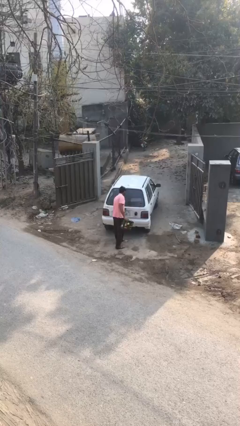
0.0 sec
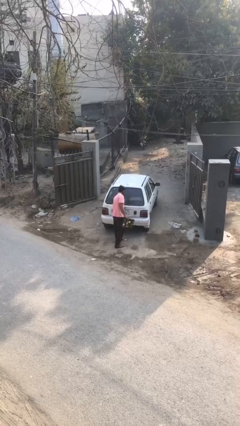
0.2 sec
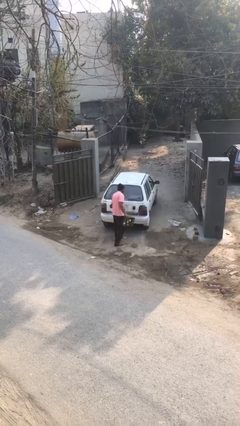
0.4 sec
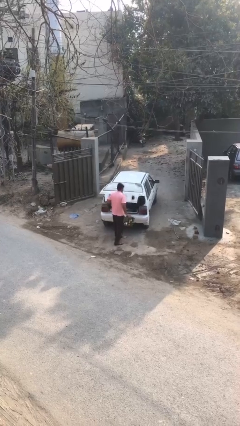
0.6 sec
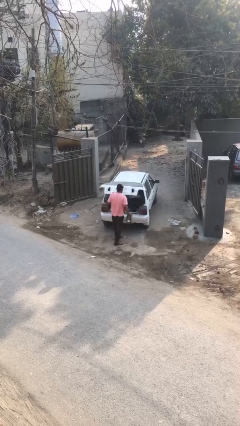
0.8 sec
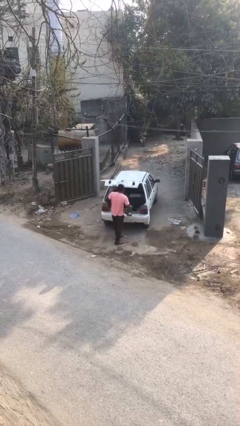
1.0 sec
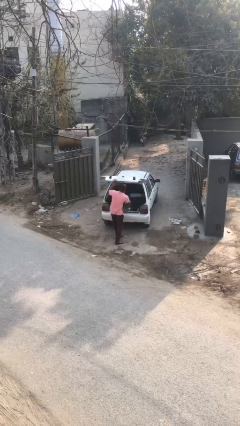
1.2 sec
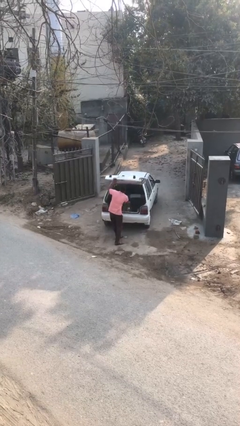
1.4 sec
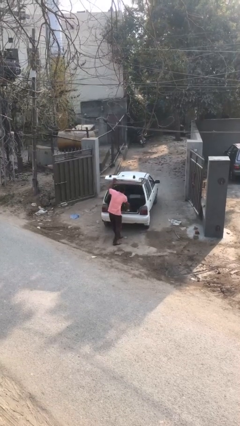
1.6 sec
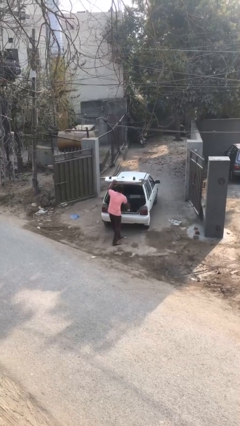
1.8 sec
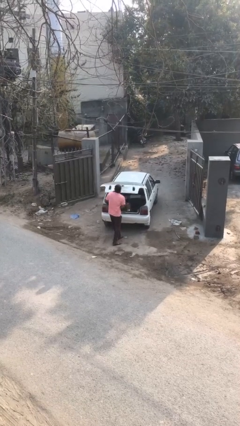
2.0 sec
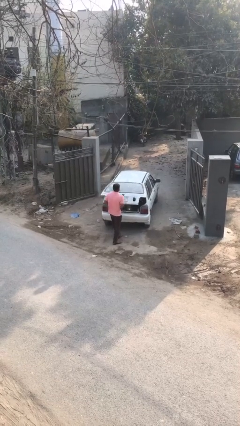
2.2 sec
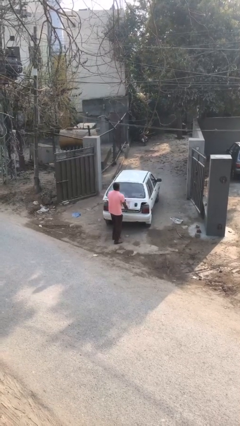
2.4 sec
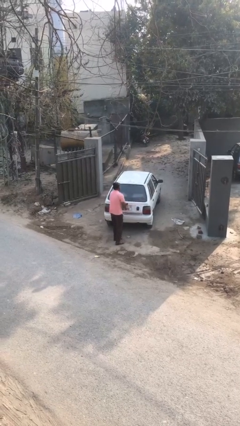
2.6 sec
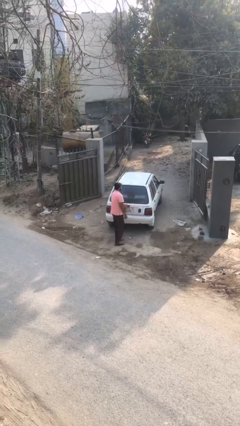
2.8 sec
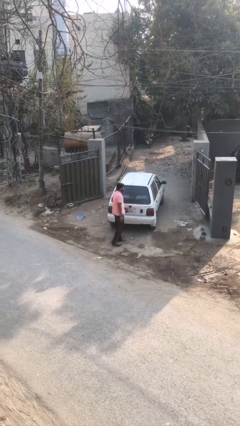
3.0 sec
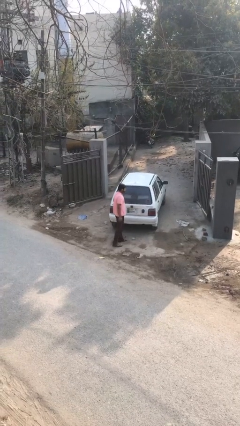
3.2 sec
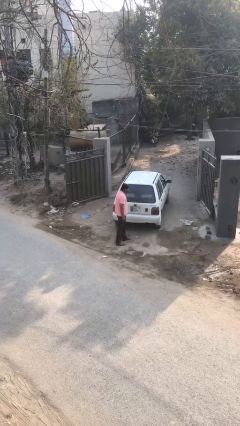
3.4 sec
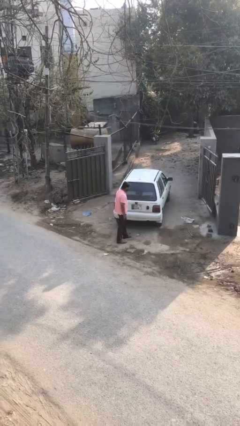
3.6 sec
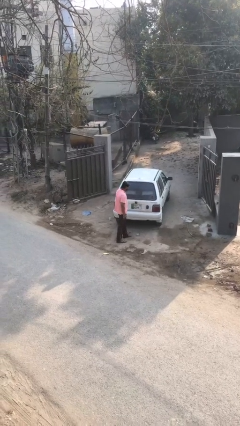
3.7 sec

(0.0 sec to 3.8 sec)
person loads car

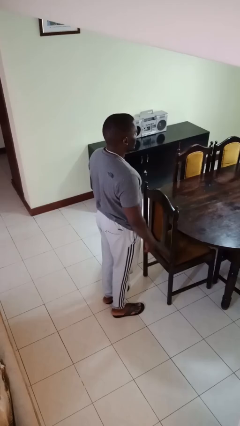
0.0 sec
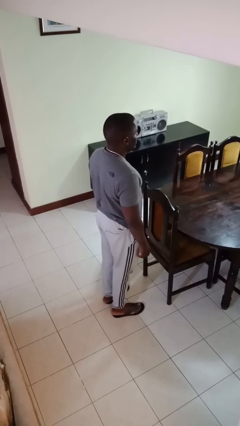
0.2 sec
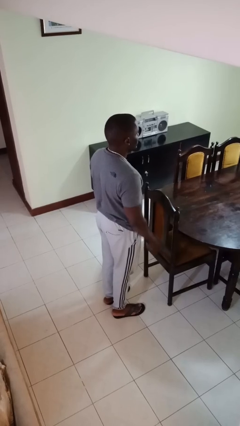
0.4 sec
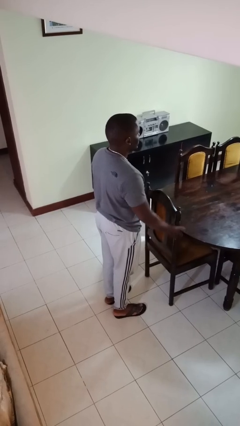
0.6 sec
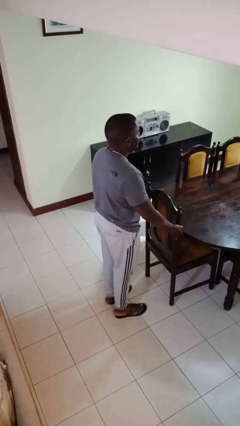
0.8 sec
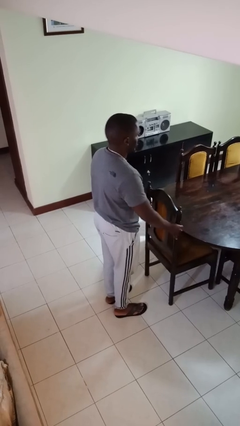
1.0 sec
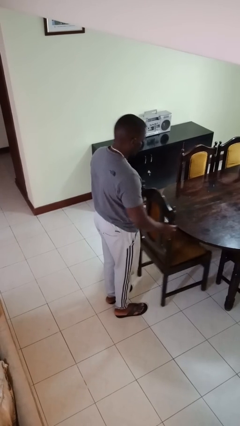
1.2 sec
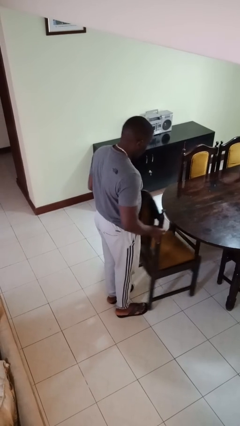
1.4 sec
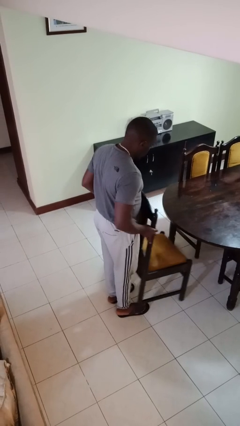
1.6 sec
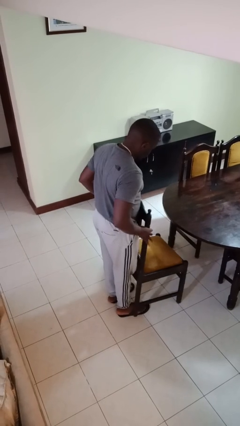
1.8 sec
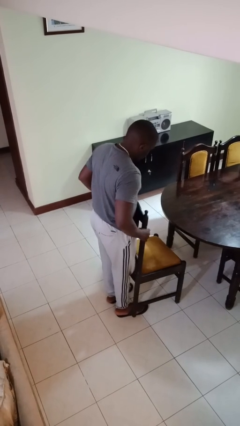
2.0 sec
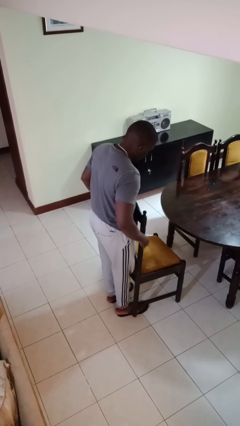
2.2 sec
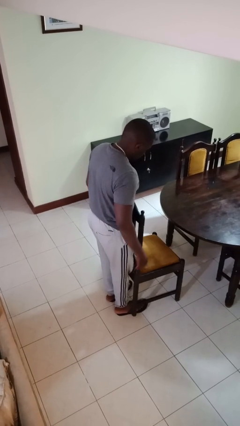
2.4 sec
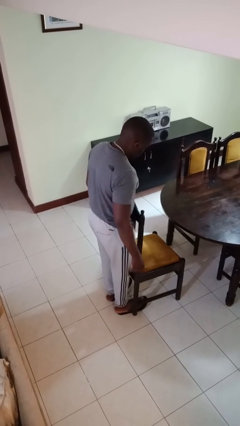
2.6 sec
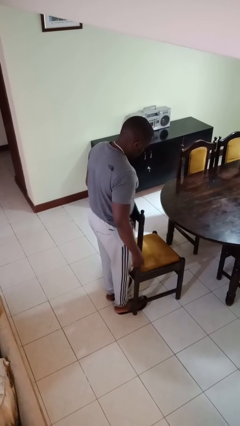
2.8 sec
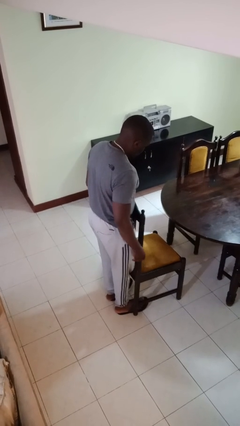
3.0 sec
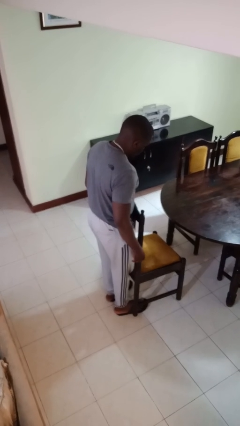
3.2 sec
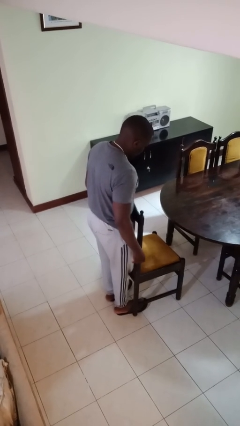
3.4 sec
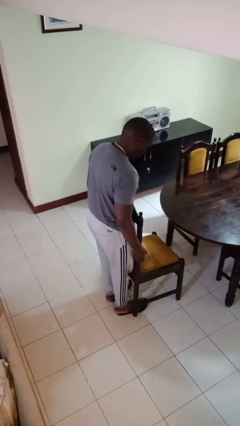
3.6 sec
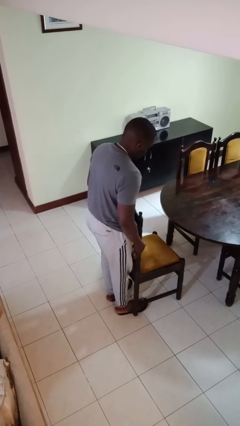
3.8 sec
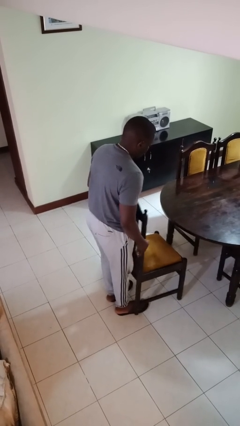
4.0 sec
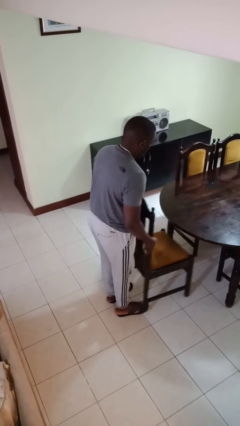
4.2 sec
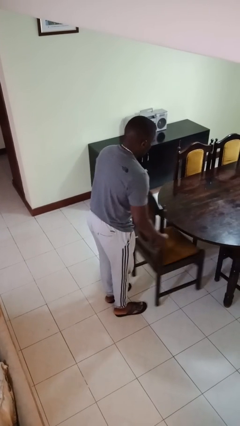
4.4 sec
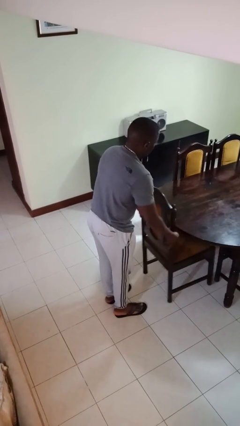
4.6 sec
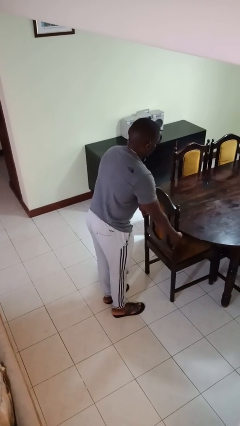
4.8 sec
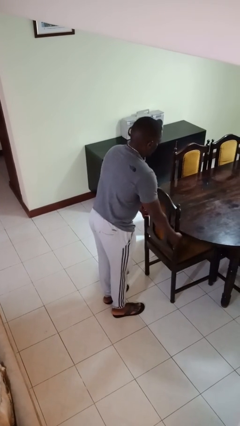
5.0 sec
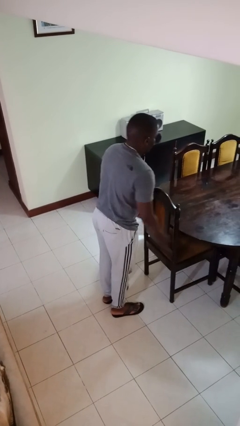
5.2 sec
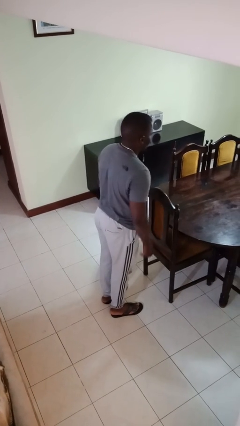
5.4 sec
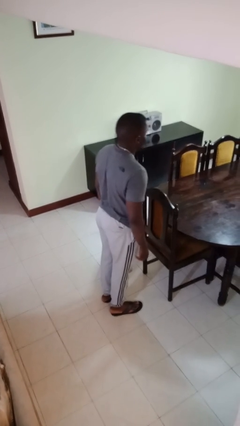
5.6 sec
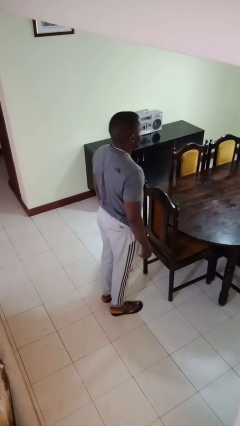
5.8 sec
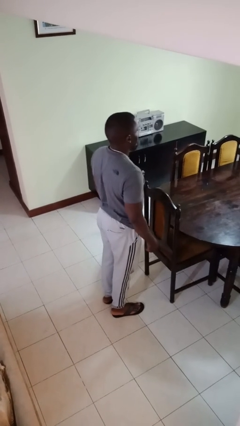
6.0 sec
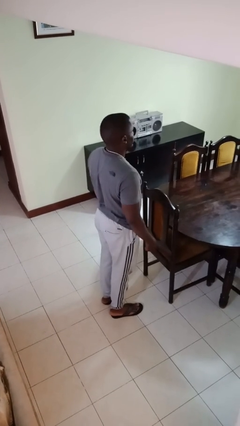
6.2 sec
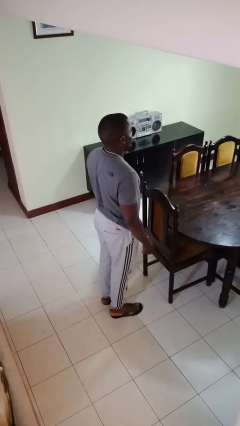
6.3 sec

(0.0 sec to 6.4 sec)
person pulls out chair

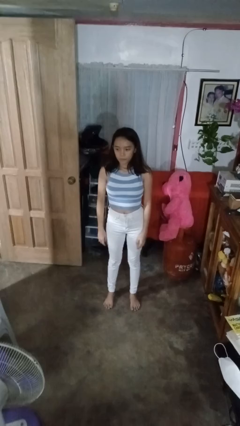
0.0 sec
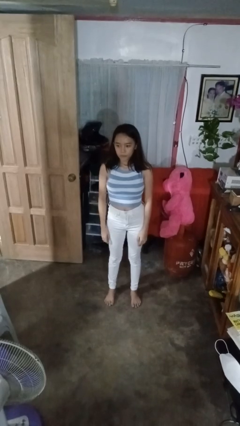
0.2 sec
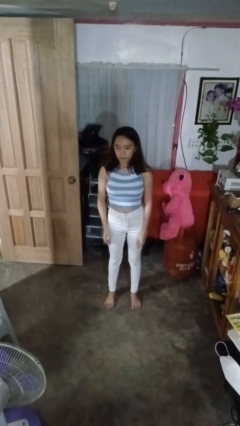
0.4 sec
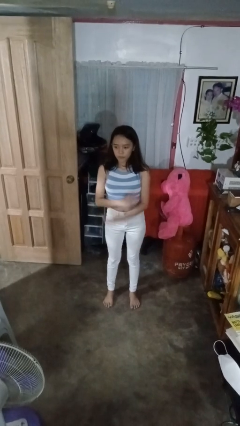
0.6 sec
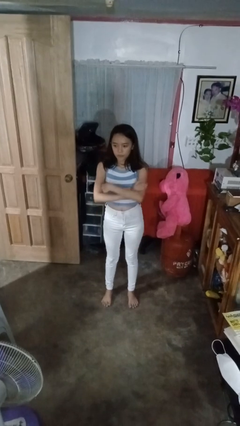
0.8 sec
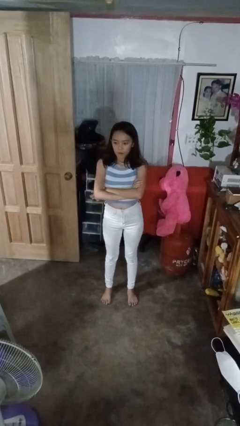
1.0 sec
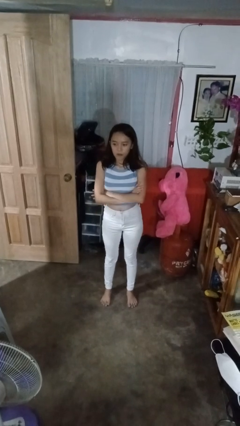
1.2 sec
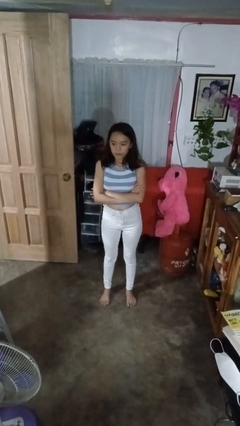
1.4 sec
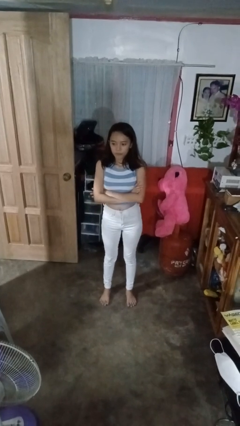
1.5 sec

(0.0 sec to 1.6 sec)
person crosses arms

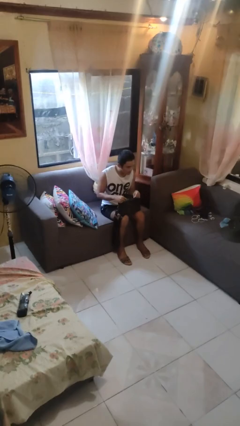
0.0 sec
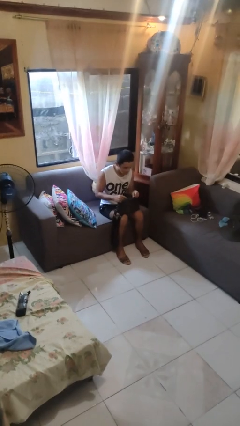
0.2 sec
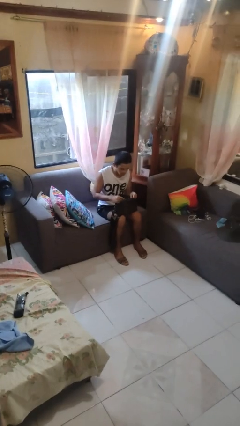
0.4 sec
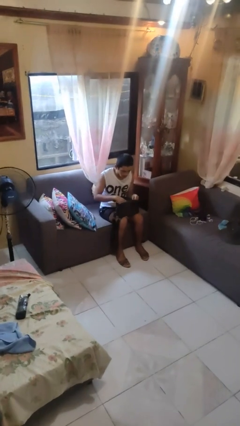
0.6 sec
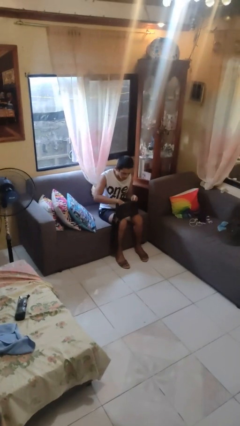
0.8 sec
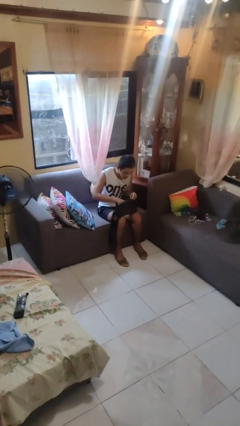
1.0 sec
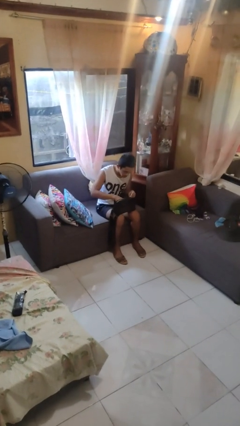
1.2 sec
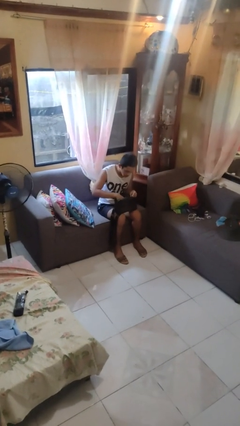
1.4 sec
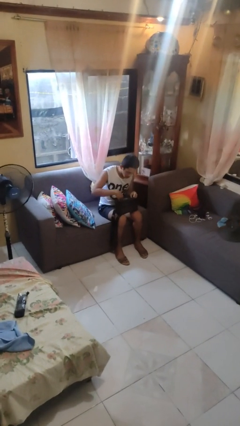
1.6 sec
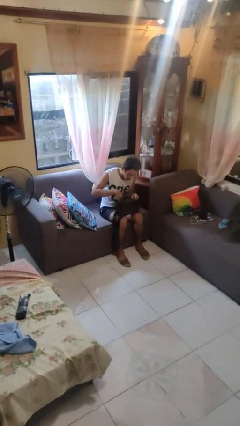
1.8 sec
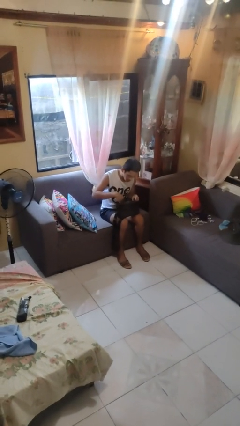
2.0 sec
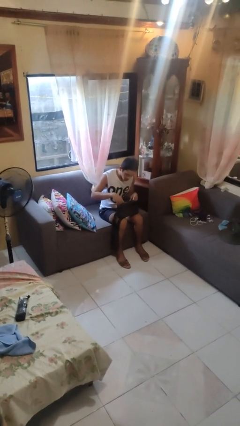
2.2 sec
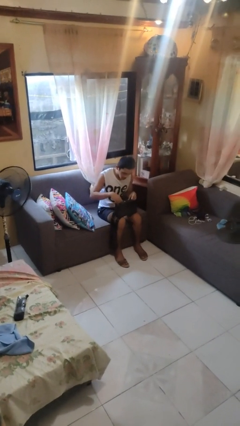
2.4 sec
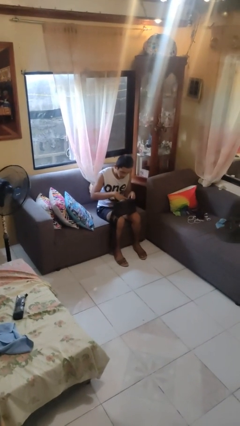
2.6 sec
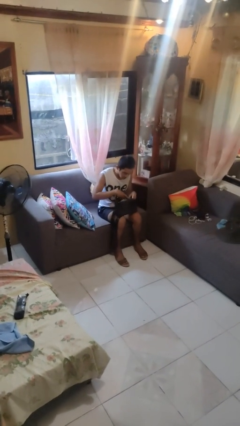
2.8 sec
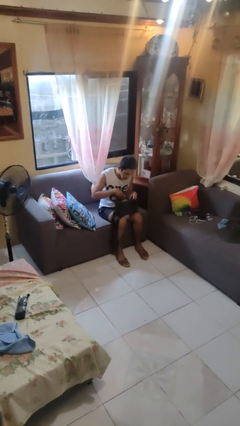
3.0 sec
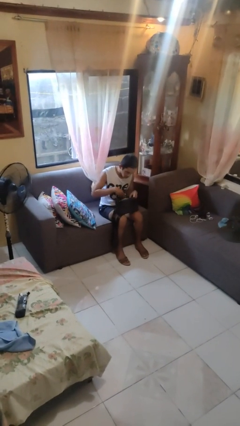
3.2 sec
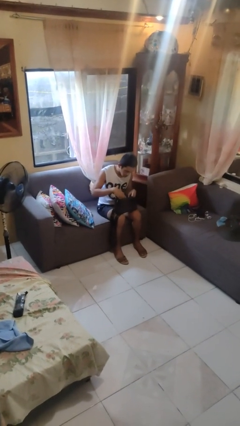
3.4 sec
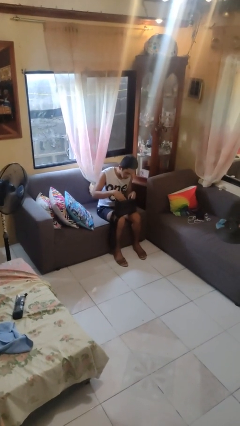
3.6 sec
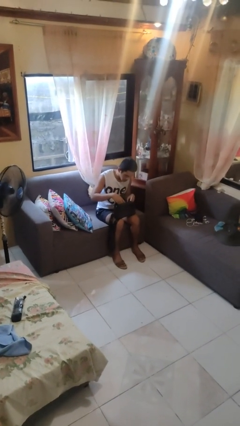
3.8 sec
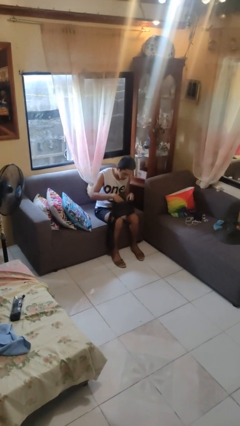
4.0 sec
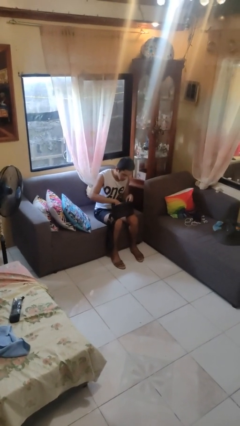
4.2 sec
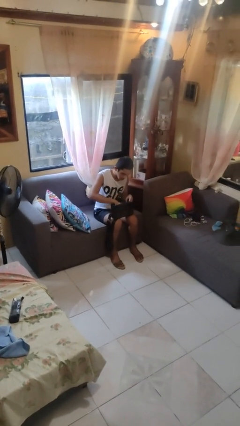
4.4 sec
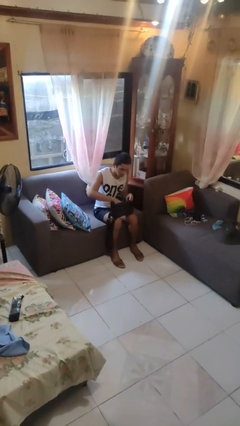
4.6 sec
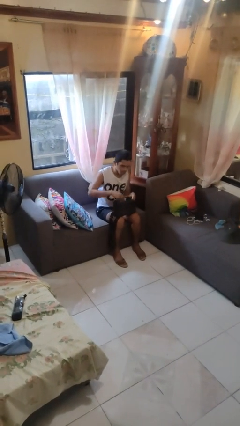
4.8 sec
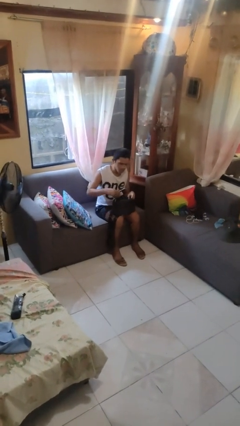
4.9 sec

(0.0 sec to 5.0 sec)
person searches in purse

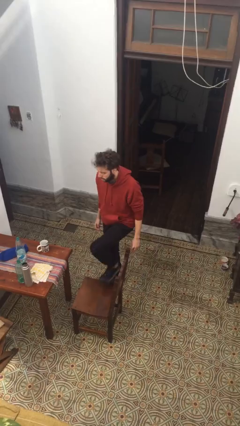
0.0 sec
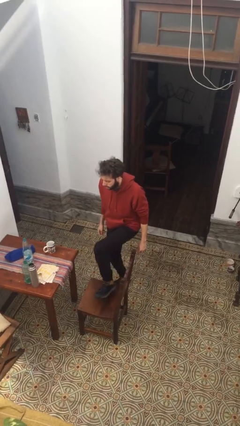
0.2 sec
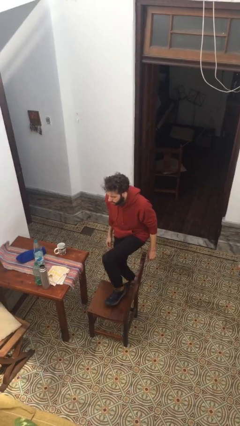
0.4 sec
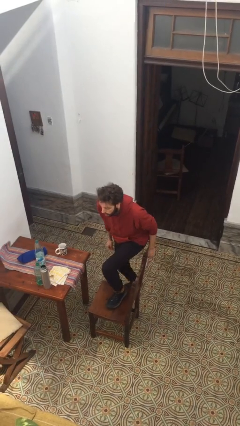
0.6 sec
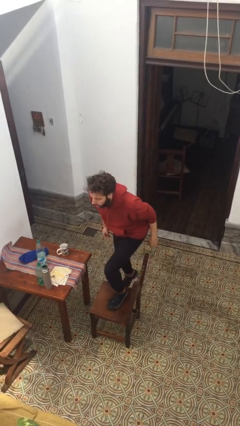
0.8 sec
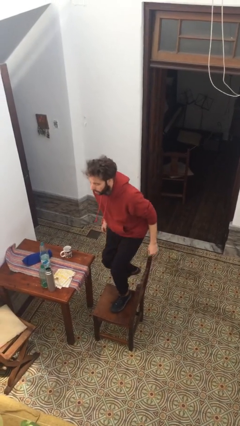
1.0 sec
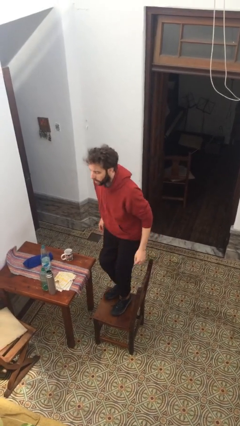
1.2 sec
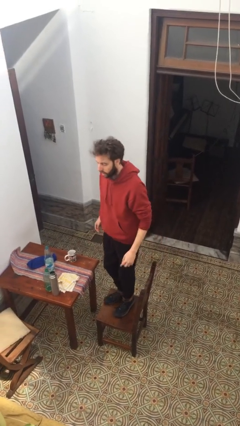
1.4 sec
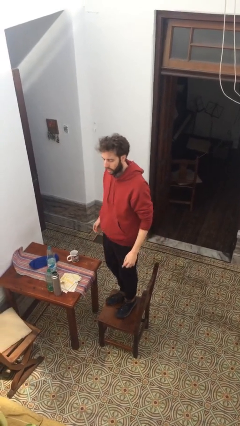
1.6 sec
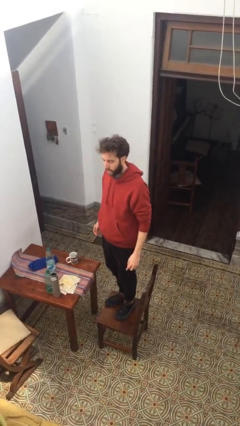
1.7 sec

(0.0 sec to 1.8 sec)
person climbs on chair
